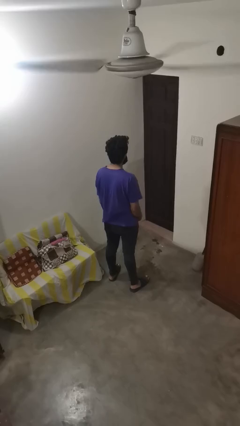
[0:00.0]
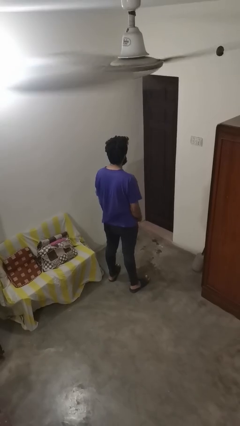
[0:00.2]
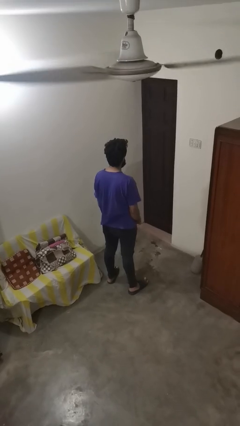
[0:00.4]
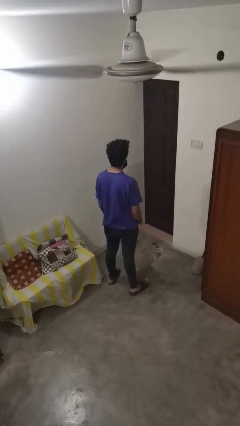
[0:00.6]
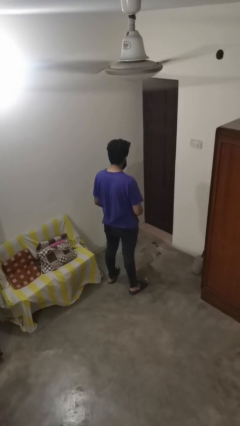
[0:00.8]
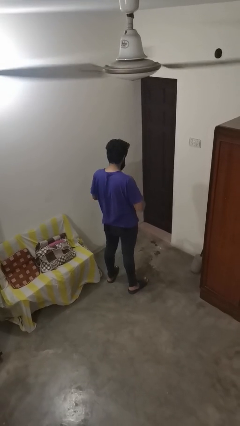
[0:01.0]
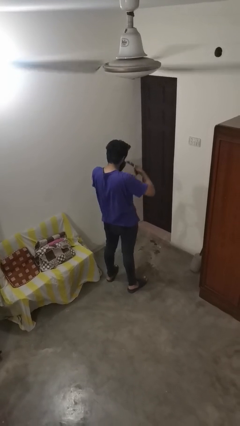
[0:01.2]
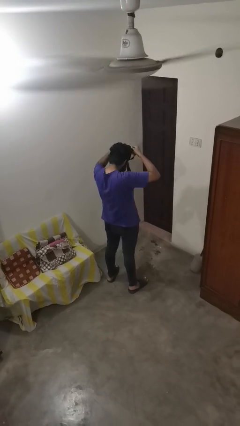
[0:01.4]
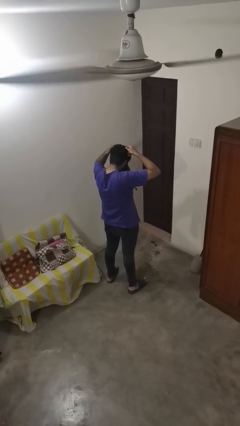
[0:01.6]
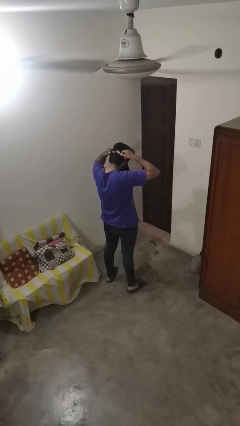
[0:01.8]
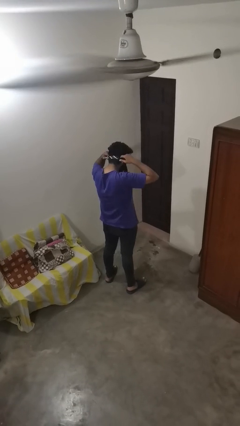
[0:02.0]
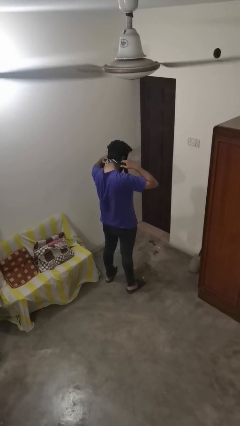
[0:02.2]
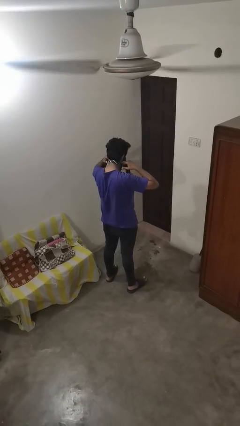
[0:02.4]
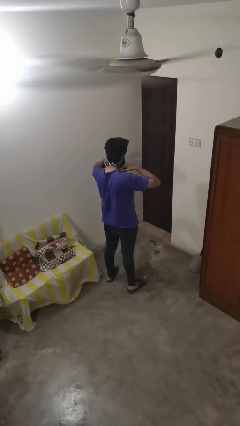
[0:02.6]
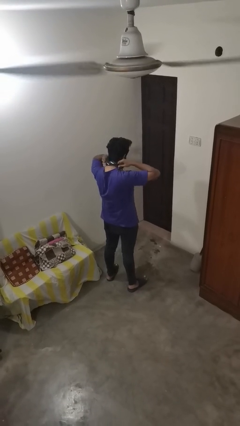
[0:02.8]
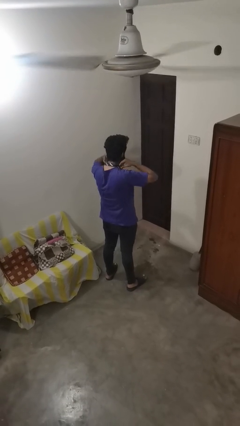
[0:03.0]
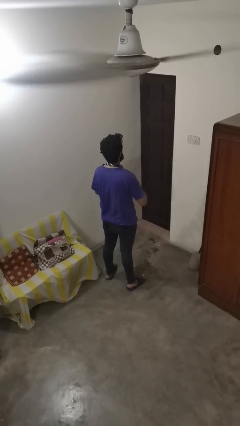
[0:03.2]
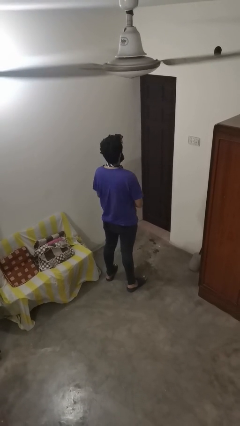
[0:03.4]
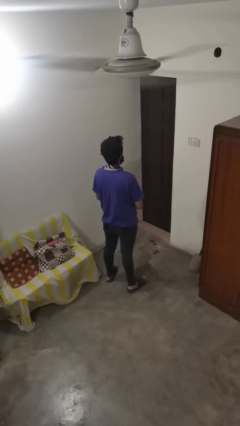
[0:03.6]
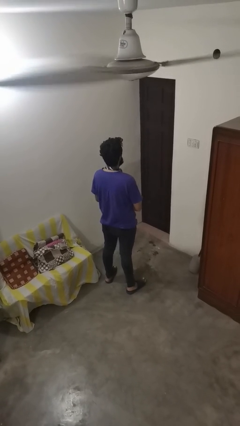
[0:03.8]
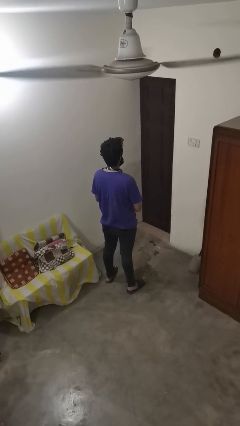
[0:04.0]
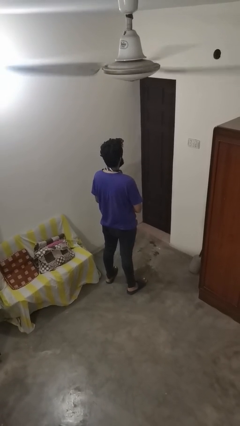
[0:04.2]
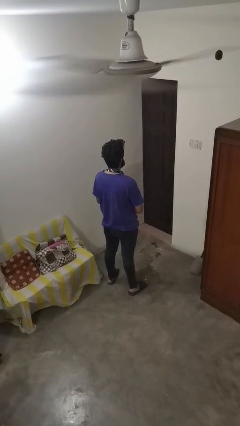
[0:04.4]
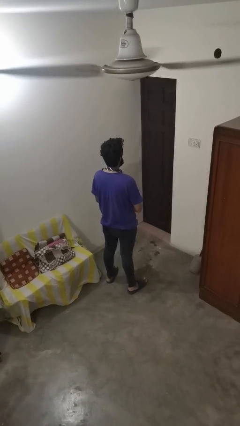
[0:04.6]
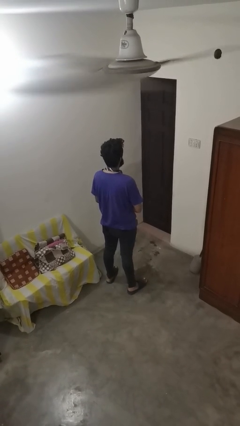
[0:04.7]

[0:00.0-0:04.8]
person puts on necktie

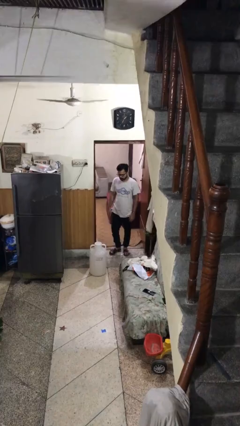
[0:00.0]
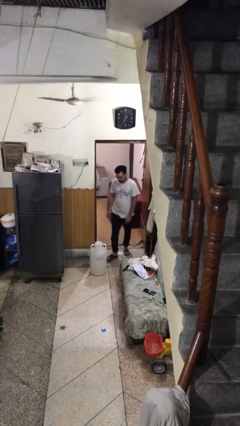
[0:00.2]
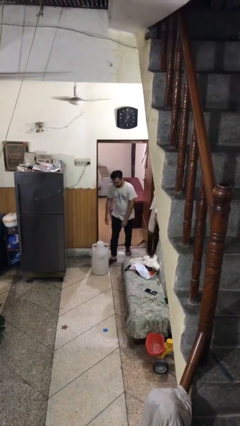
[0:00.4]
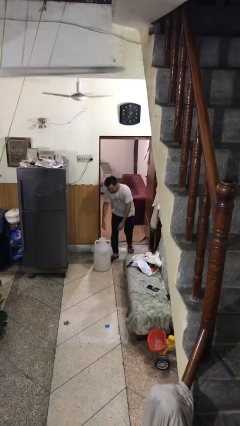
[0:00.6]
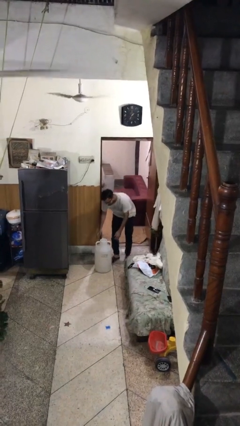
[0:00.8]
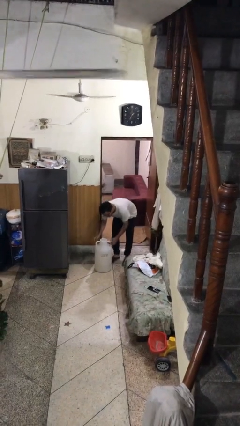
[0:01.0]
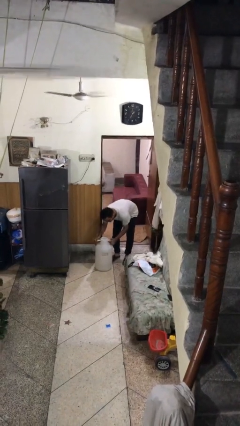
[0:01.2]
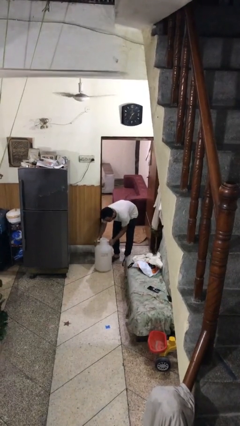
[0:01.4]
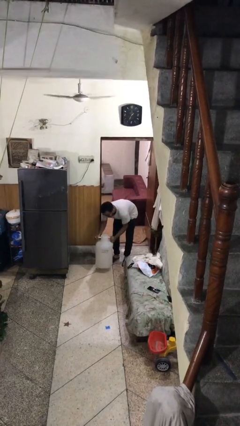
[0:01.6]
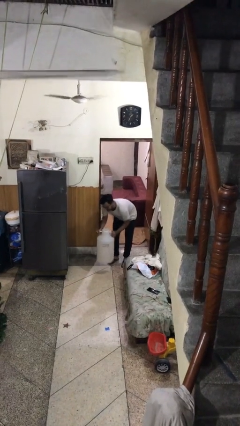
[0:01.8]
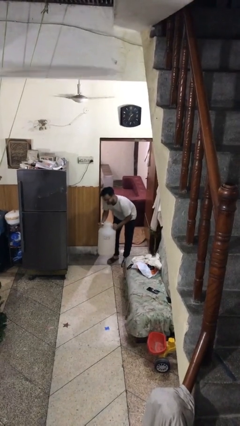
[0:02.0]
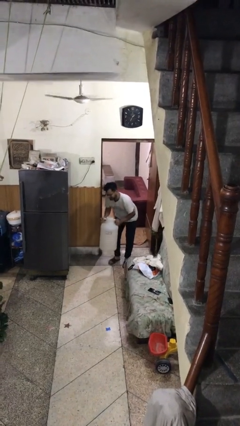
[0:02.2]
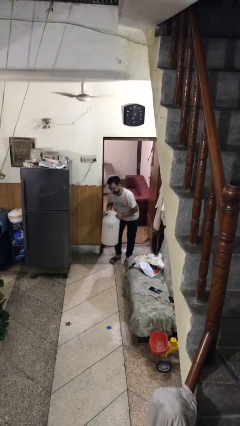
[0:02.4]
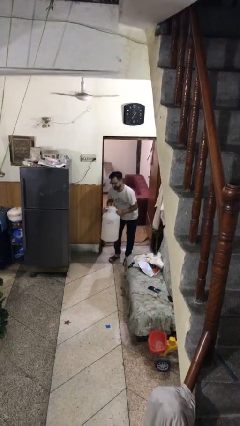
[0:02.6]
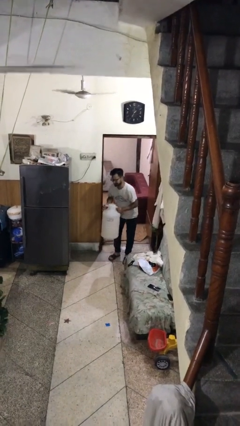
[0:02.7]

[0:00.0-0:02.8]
person picks up object from floor

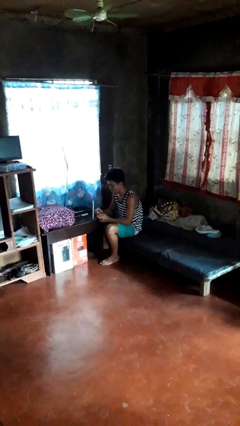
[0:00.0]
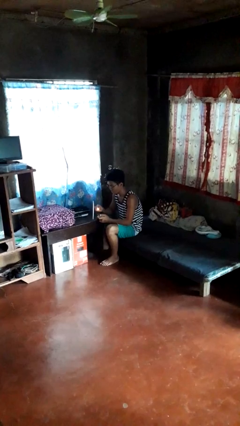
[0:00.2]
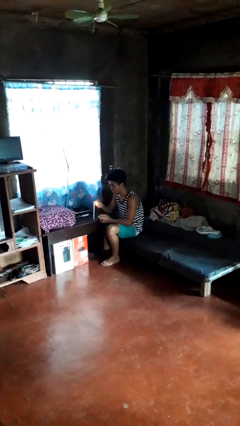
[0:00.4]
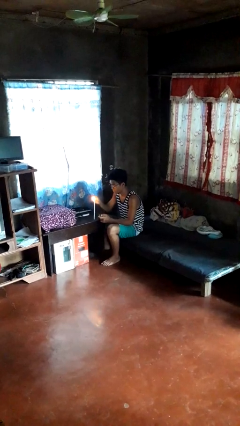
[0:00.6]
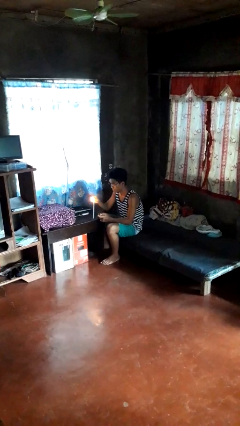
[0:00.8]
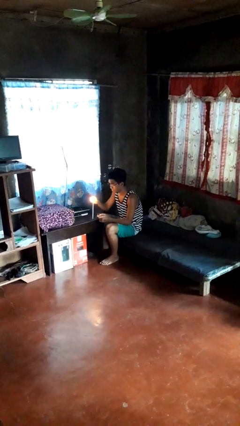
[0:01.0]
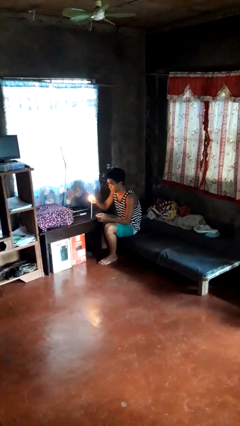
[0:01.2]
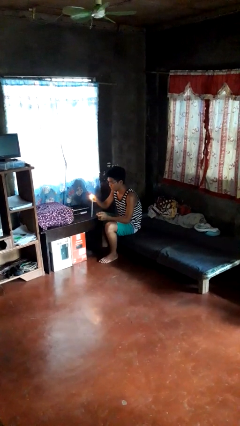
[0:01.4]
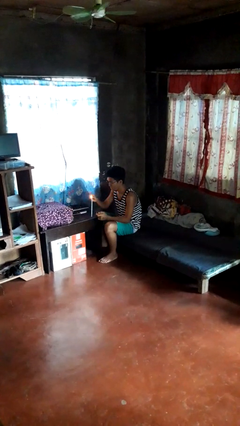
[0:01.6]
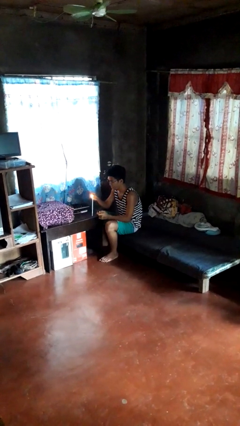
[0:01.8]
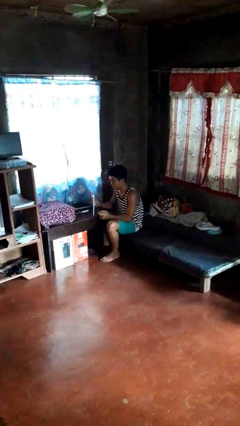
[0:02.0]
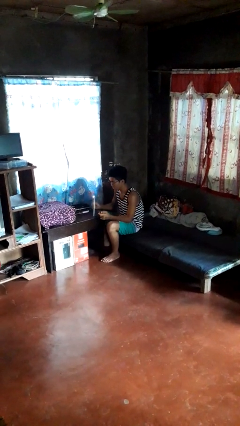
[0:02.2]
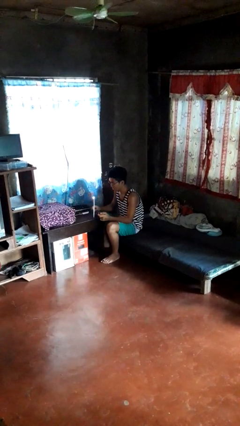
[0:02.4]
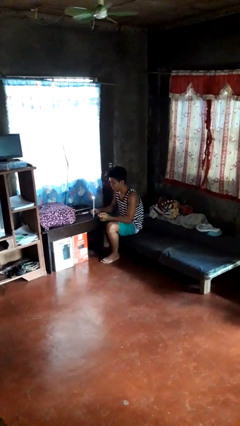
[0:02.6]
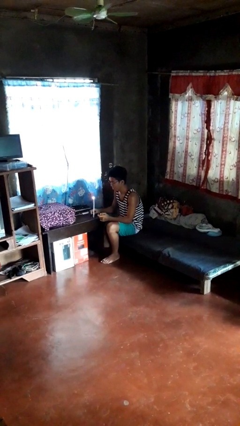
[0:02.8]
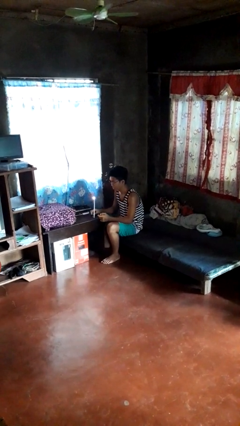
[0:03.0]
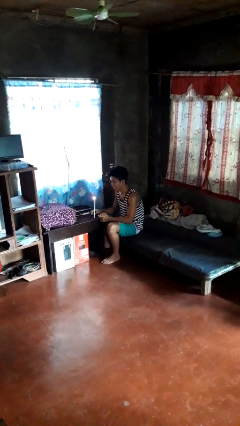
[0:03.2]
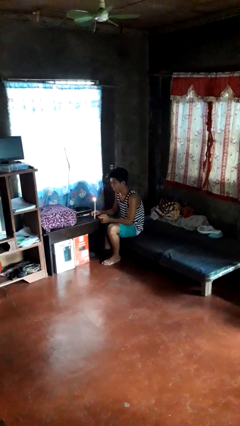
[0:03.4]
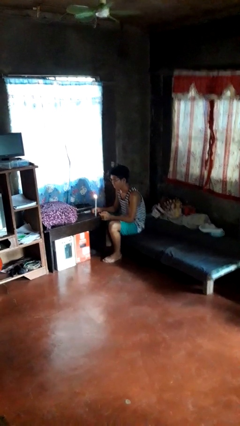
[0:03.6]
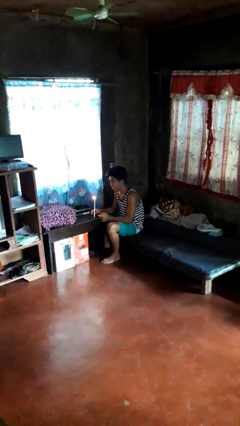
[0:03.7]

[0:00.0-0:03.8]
person lights candle

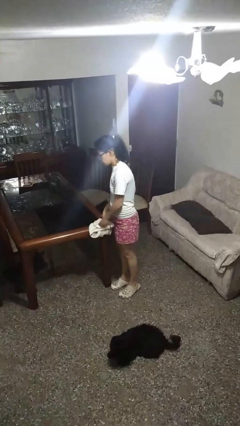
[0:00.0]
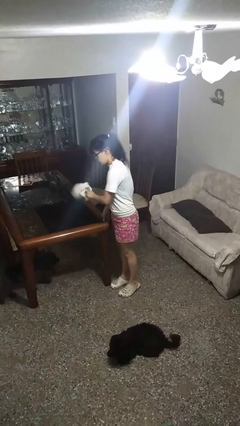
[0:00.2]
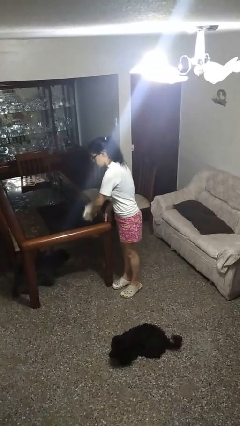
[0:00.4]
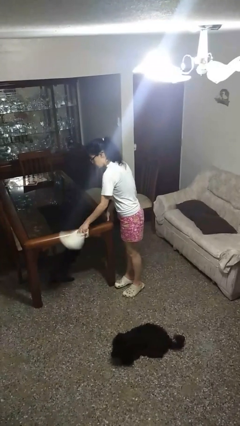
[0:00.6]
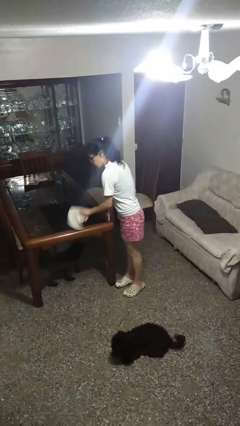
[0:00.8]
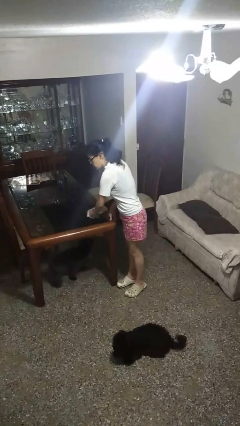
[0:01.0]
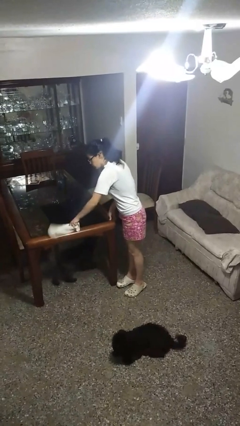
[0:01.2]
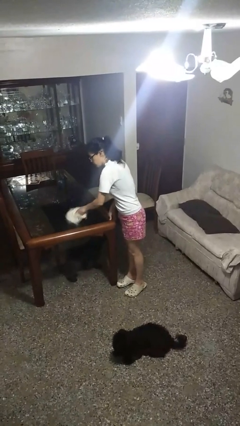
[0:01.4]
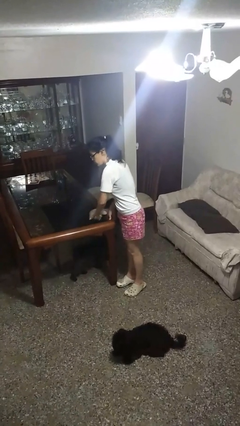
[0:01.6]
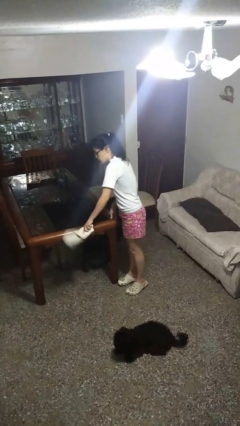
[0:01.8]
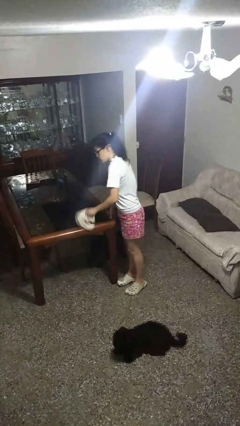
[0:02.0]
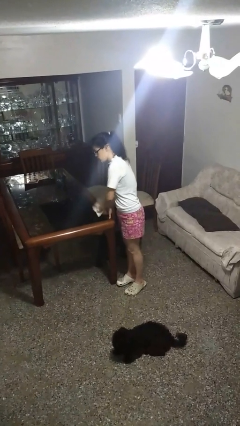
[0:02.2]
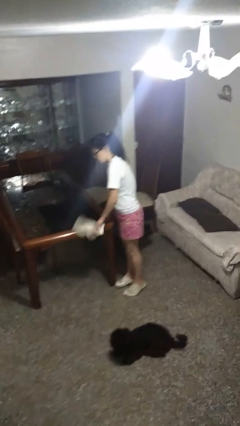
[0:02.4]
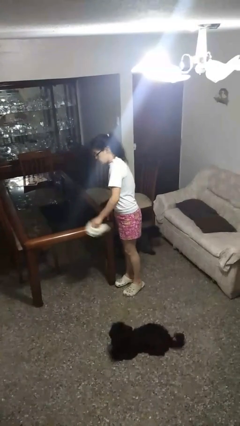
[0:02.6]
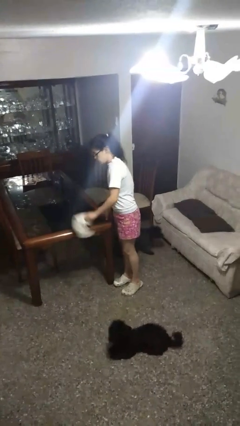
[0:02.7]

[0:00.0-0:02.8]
person cleans table with rag

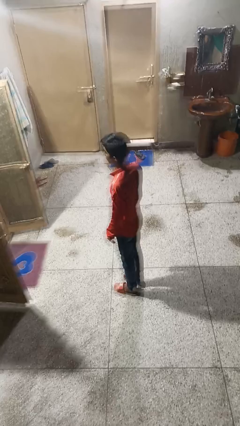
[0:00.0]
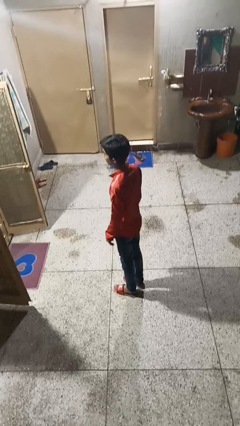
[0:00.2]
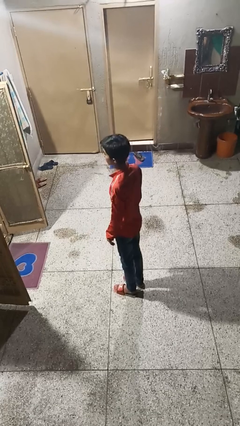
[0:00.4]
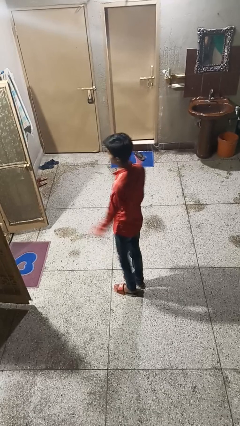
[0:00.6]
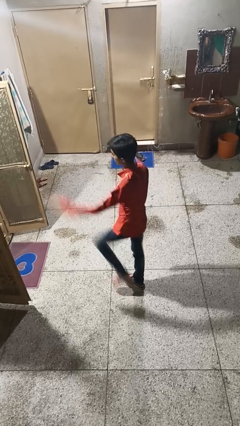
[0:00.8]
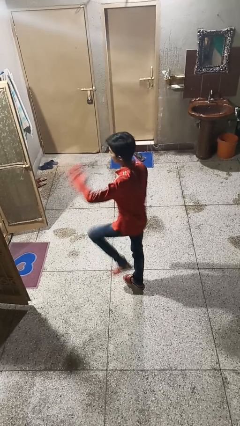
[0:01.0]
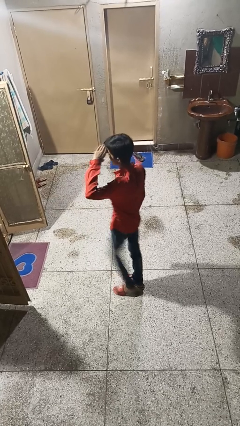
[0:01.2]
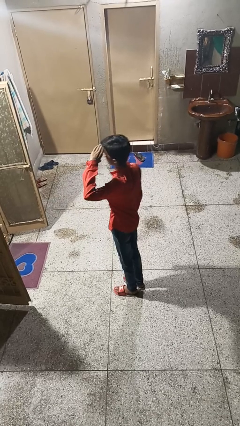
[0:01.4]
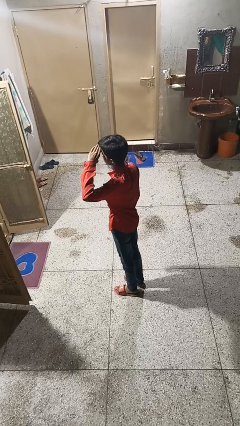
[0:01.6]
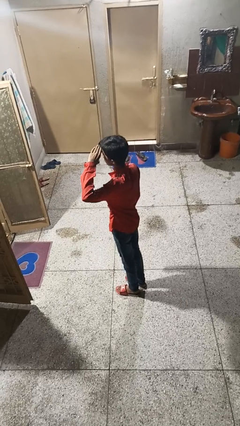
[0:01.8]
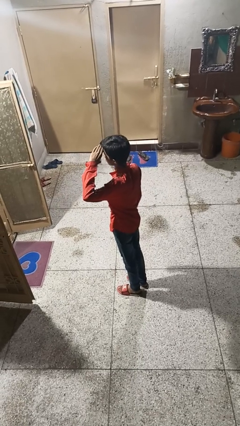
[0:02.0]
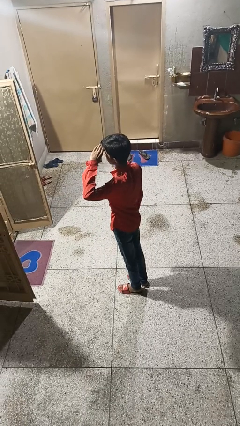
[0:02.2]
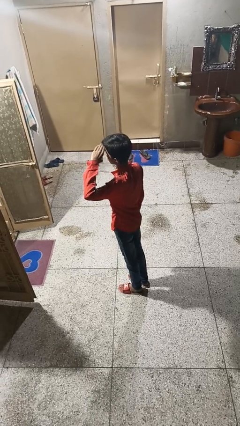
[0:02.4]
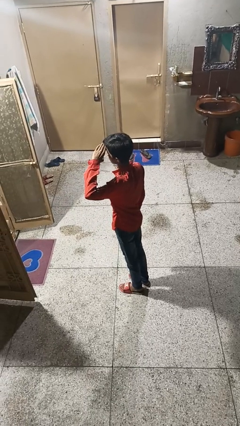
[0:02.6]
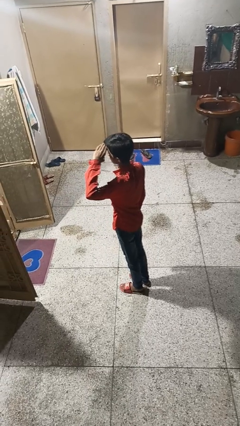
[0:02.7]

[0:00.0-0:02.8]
person salutes

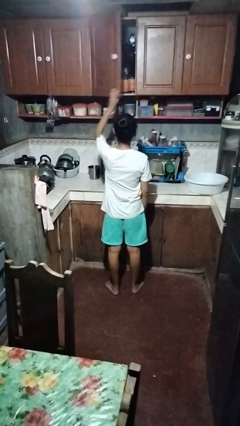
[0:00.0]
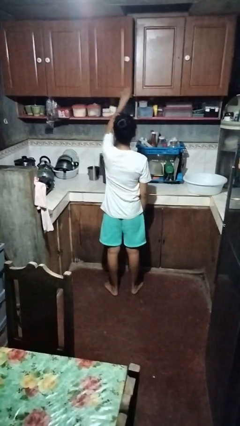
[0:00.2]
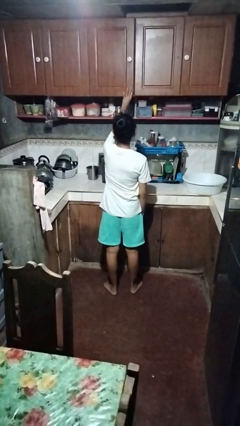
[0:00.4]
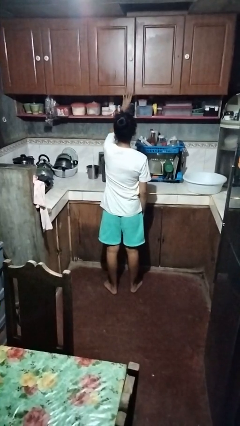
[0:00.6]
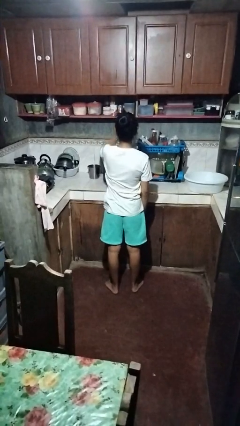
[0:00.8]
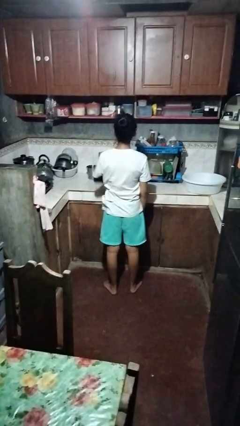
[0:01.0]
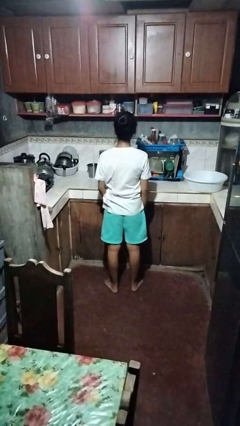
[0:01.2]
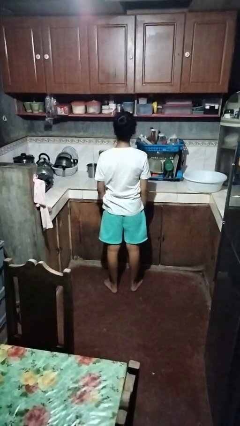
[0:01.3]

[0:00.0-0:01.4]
person closes cabinet
